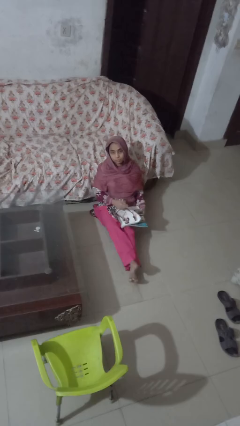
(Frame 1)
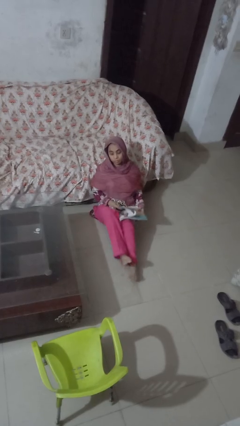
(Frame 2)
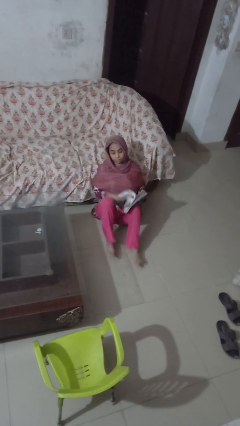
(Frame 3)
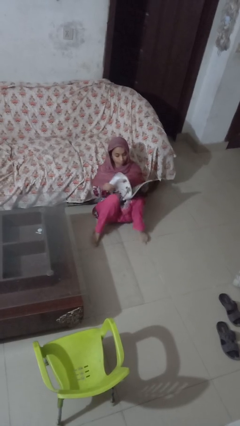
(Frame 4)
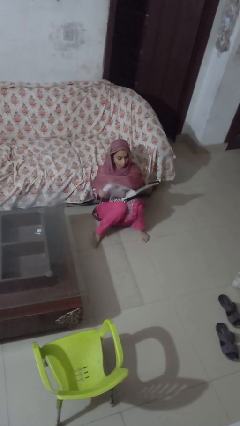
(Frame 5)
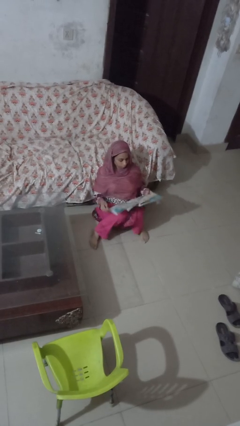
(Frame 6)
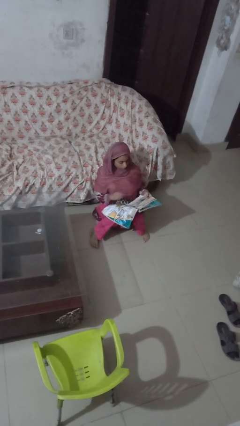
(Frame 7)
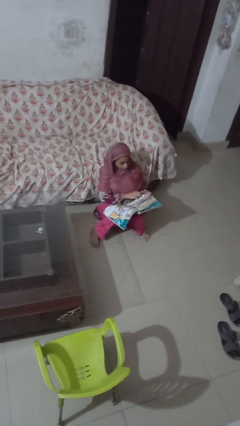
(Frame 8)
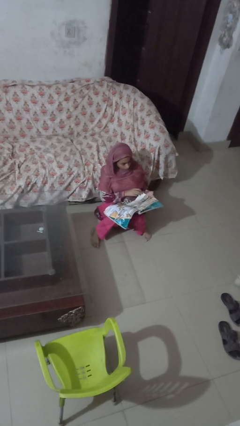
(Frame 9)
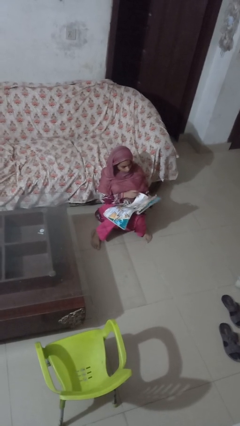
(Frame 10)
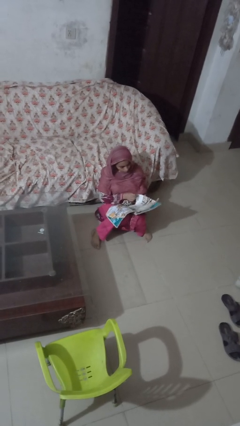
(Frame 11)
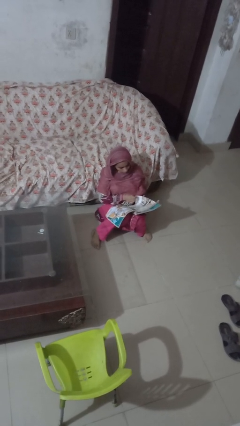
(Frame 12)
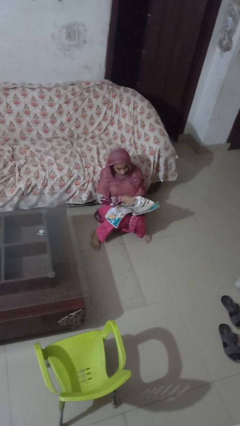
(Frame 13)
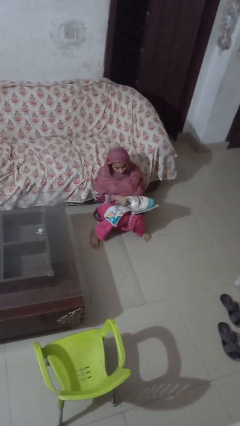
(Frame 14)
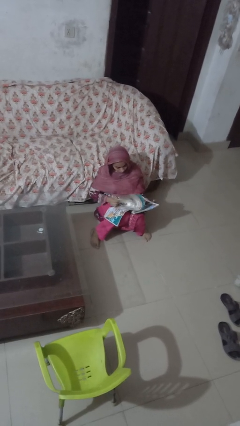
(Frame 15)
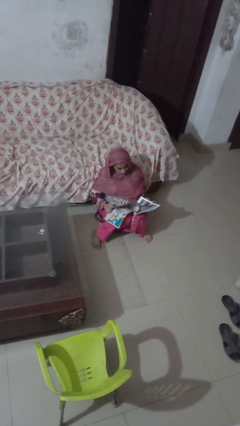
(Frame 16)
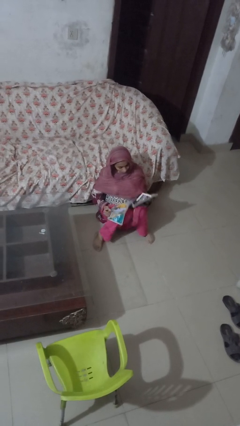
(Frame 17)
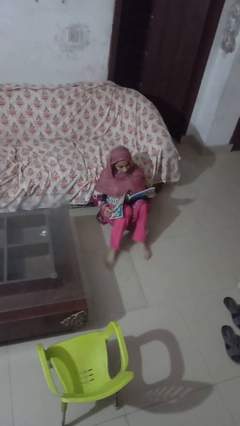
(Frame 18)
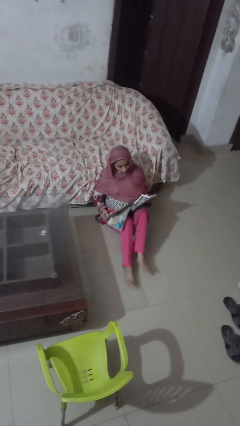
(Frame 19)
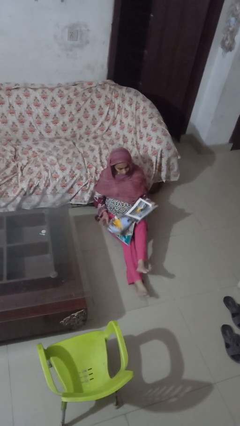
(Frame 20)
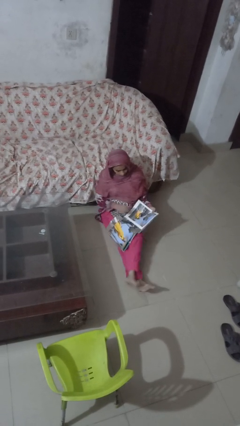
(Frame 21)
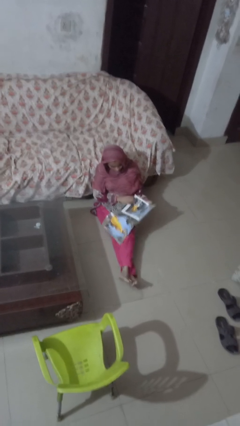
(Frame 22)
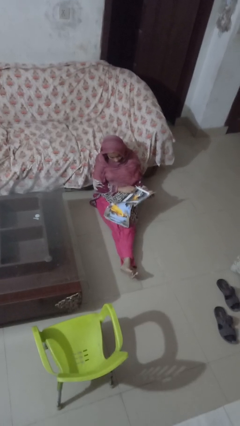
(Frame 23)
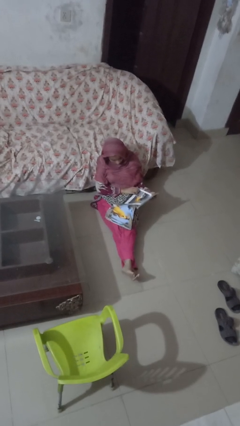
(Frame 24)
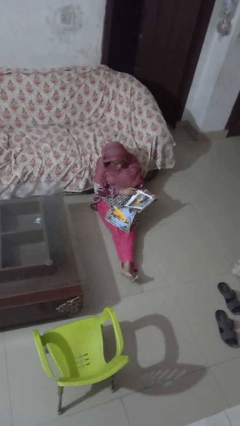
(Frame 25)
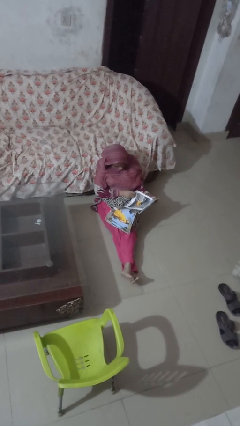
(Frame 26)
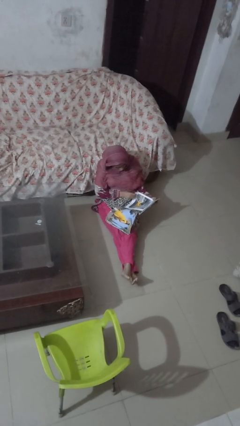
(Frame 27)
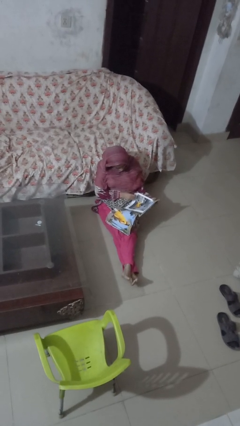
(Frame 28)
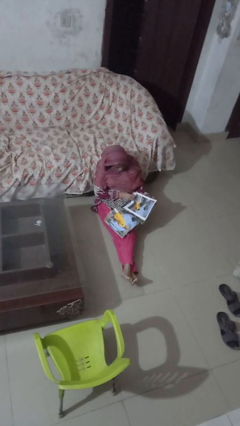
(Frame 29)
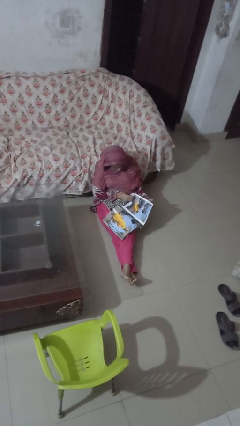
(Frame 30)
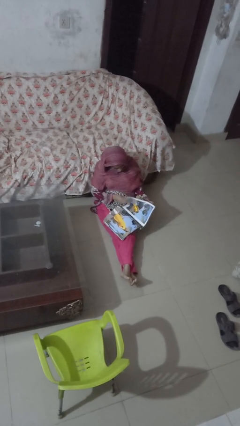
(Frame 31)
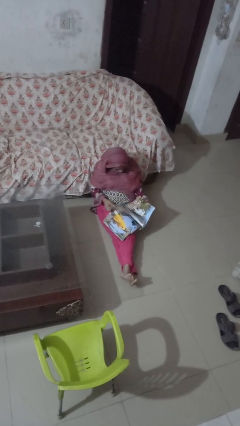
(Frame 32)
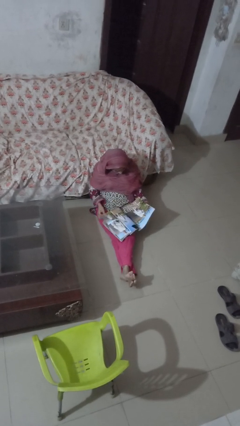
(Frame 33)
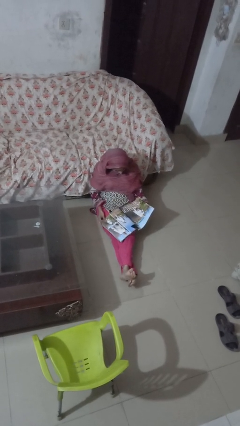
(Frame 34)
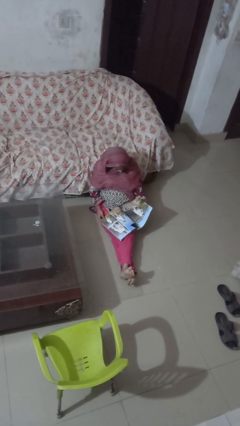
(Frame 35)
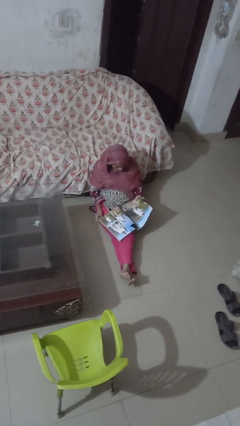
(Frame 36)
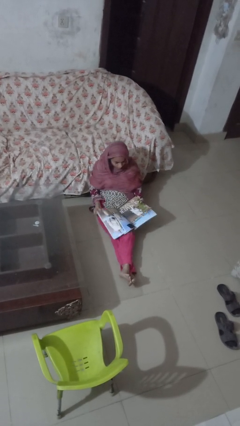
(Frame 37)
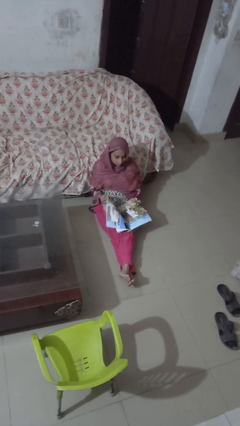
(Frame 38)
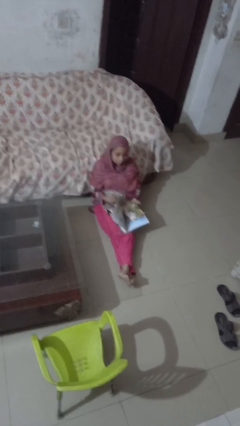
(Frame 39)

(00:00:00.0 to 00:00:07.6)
person reads magazine

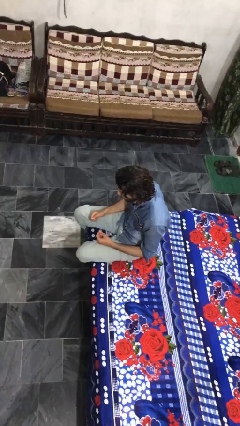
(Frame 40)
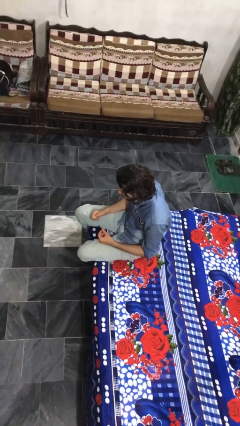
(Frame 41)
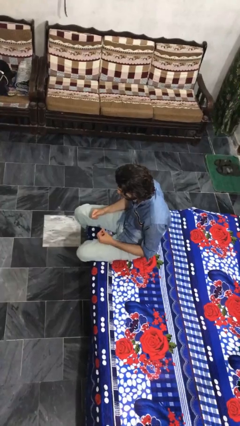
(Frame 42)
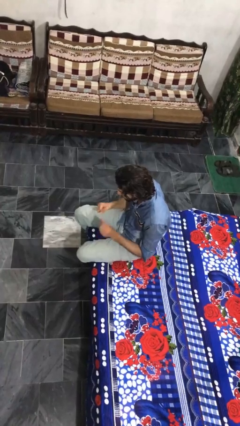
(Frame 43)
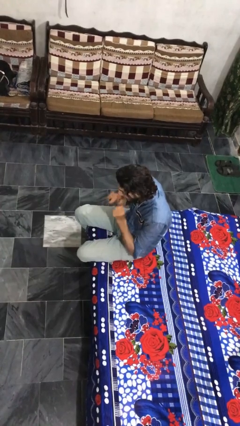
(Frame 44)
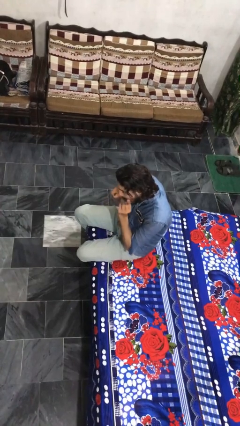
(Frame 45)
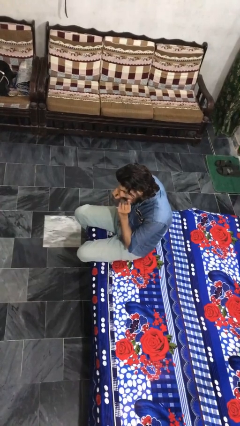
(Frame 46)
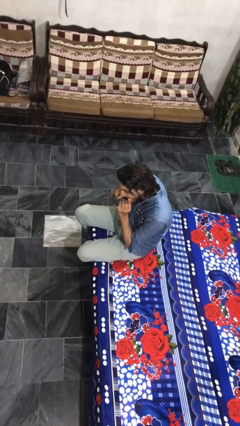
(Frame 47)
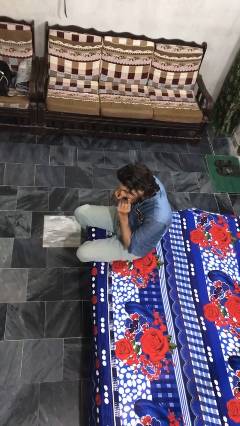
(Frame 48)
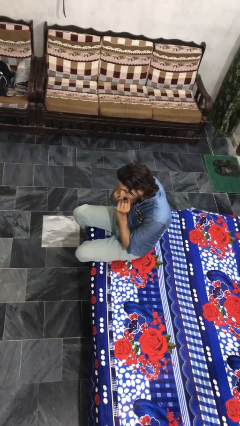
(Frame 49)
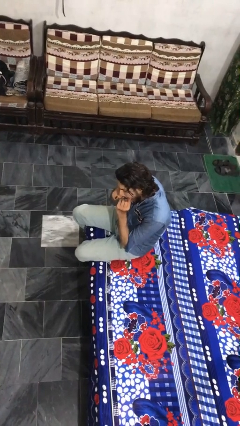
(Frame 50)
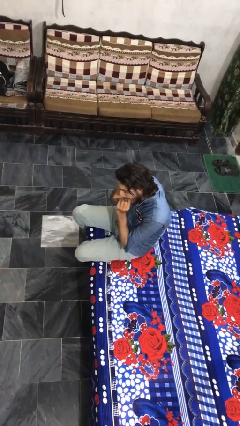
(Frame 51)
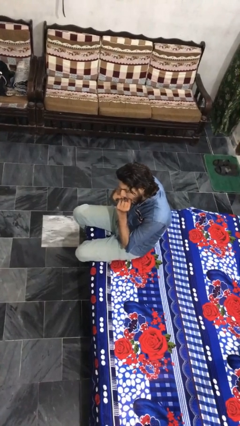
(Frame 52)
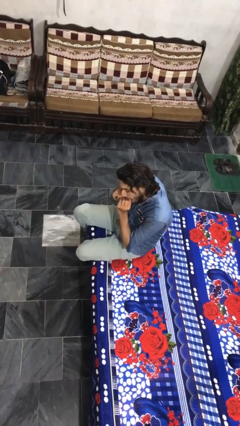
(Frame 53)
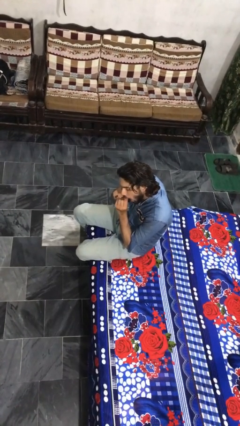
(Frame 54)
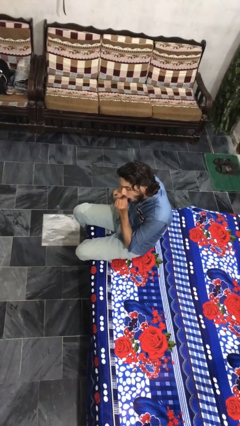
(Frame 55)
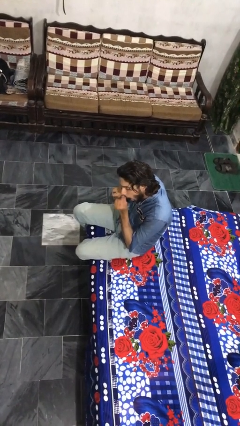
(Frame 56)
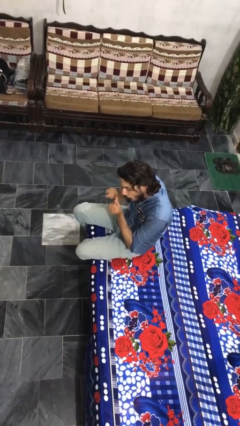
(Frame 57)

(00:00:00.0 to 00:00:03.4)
person flosses

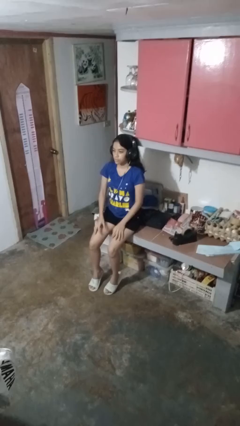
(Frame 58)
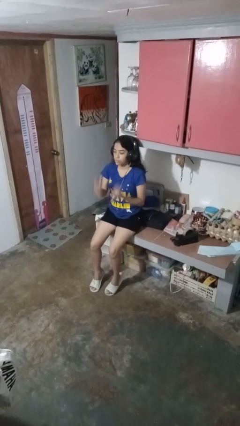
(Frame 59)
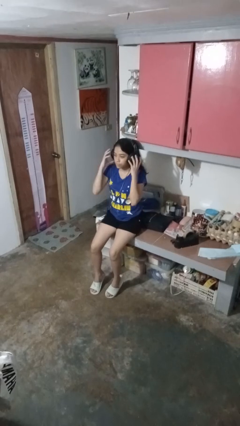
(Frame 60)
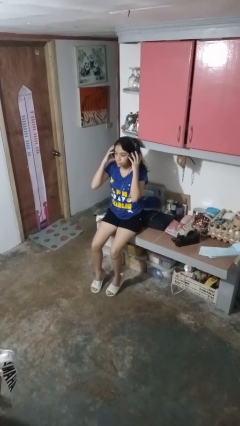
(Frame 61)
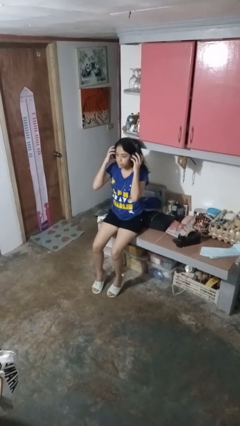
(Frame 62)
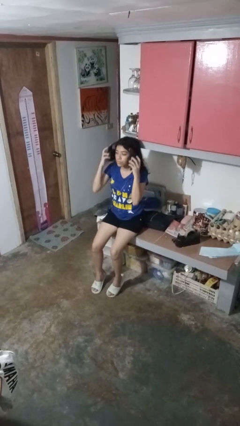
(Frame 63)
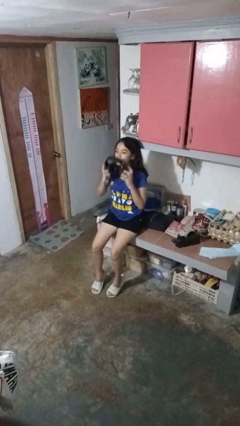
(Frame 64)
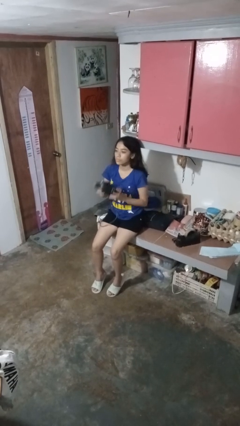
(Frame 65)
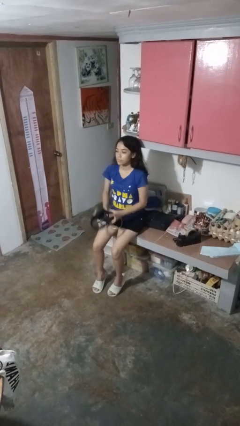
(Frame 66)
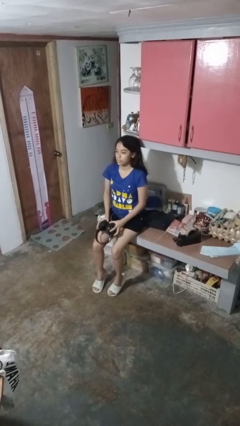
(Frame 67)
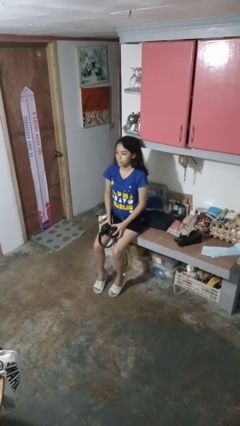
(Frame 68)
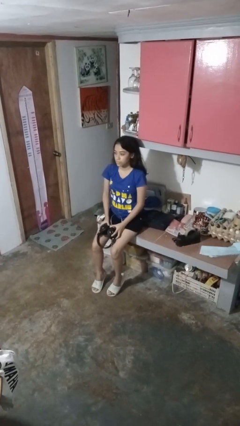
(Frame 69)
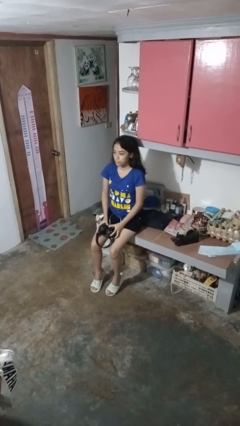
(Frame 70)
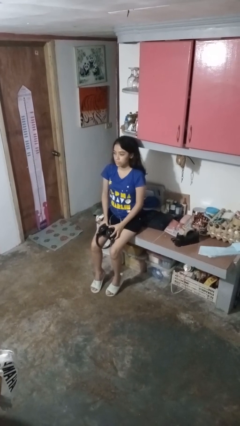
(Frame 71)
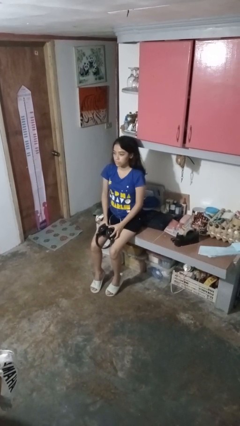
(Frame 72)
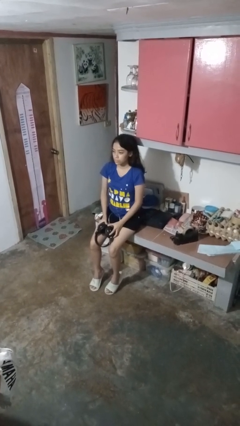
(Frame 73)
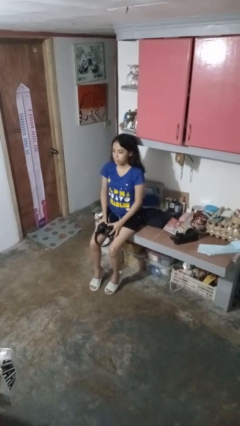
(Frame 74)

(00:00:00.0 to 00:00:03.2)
person takes off headphones

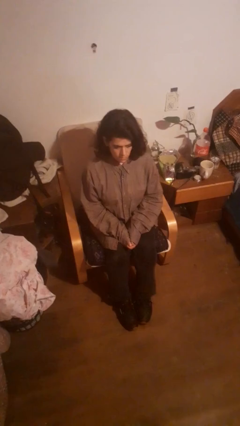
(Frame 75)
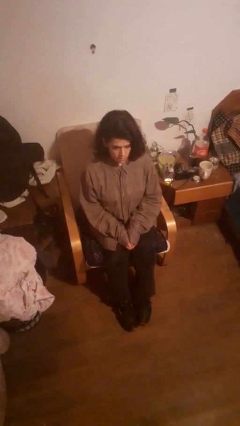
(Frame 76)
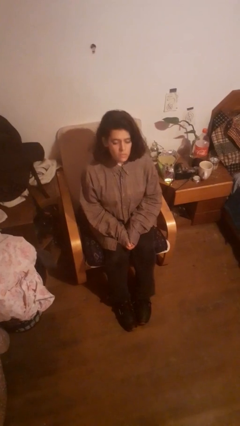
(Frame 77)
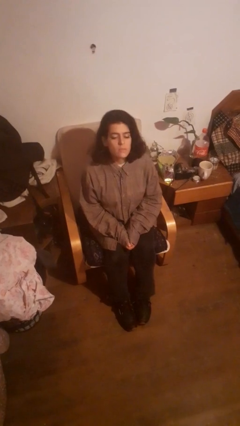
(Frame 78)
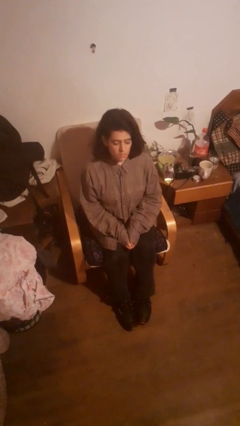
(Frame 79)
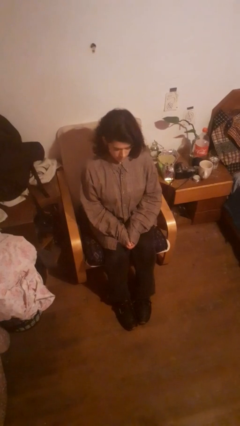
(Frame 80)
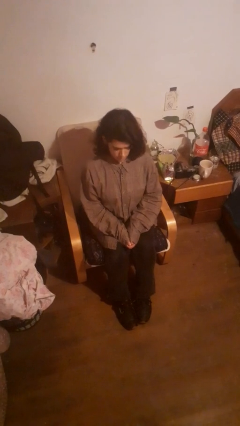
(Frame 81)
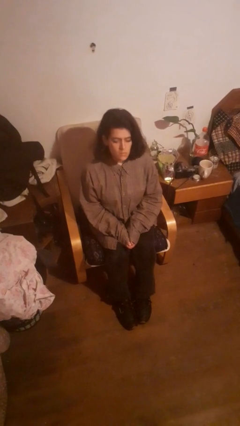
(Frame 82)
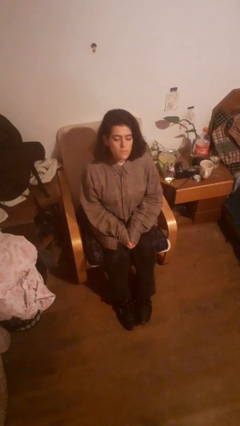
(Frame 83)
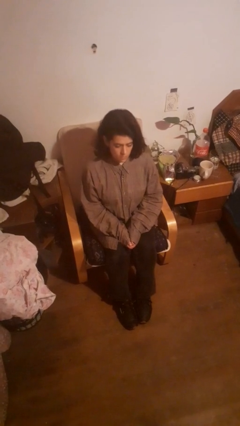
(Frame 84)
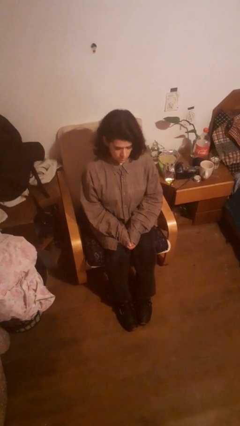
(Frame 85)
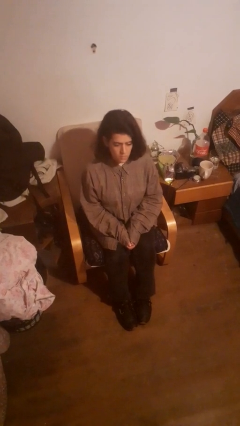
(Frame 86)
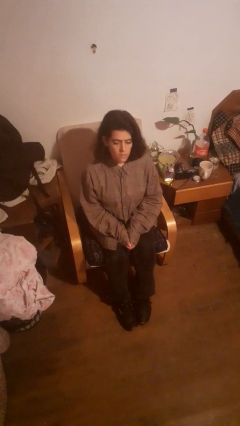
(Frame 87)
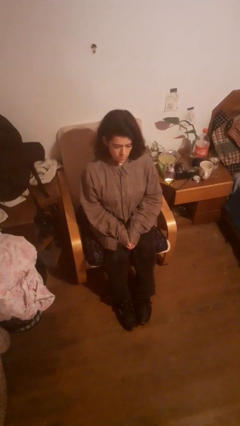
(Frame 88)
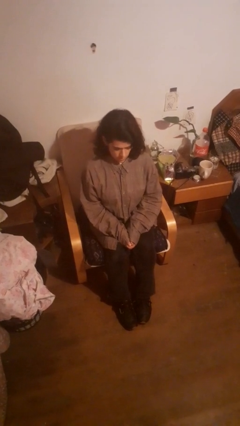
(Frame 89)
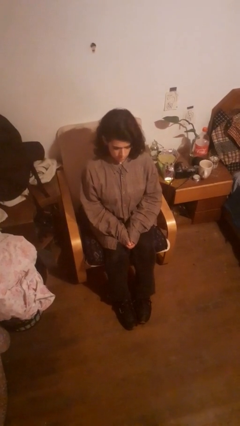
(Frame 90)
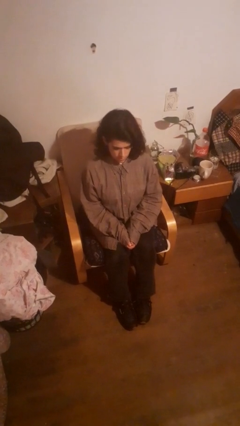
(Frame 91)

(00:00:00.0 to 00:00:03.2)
person nods head

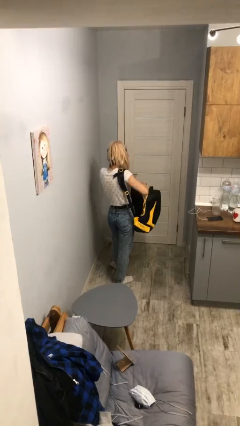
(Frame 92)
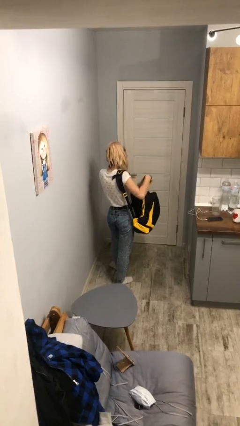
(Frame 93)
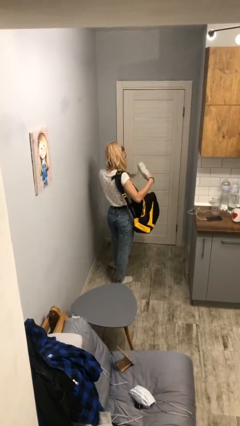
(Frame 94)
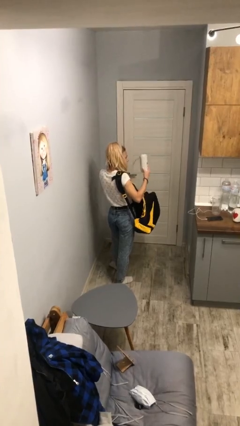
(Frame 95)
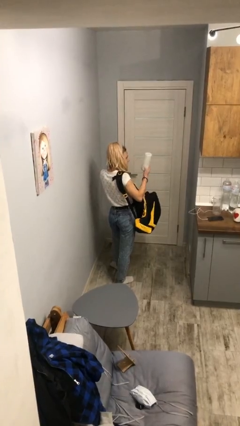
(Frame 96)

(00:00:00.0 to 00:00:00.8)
person takes object from backpack
